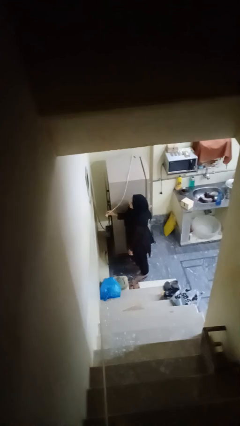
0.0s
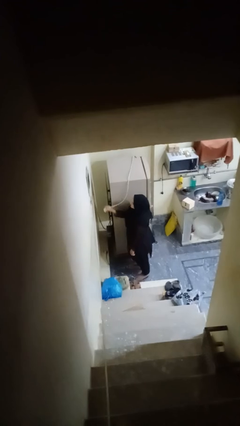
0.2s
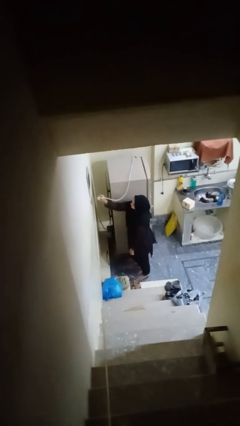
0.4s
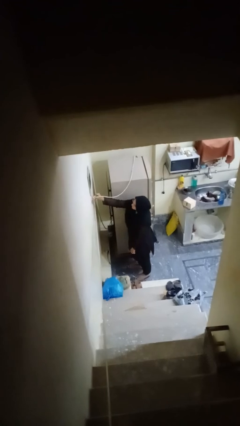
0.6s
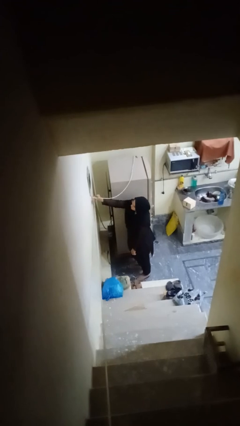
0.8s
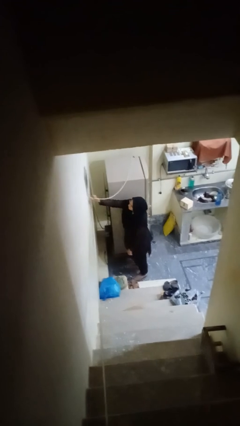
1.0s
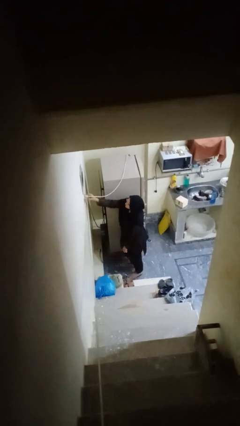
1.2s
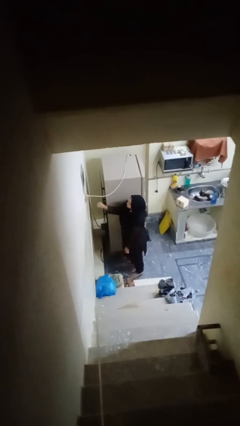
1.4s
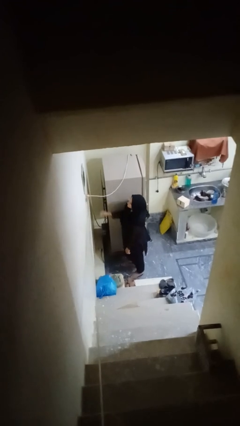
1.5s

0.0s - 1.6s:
person plugs into electrical socket

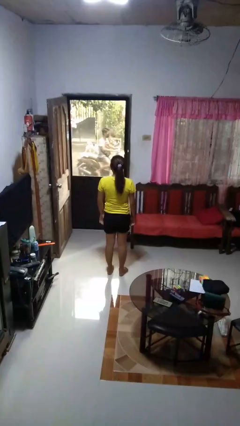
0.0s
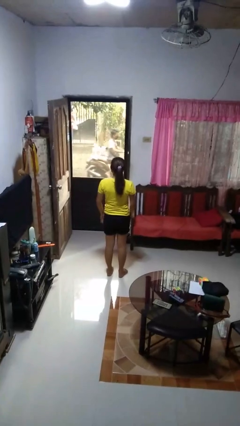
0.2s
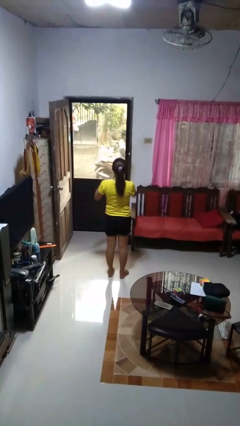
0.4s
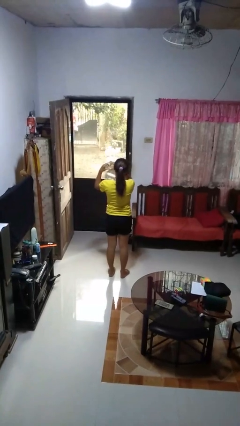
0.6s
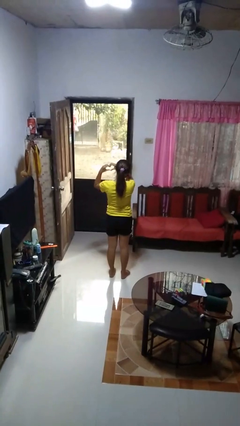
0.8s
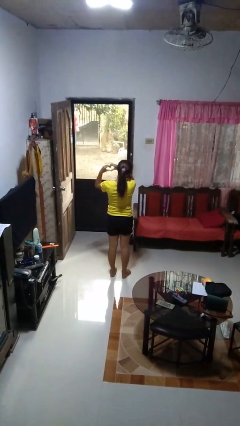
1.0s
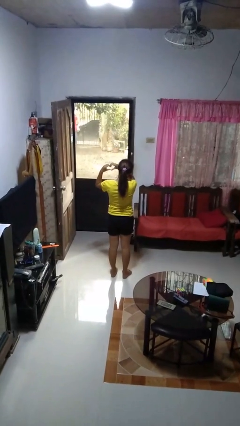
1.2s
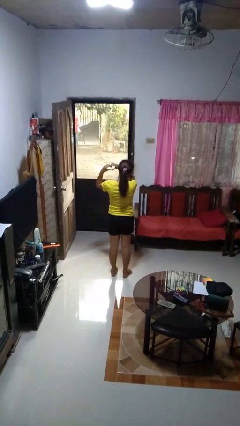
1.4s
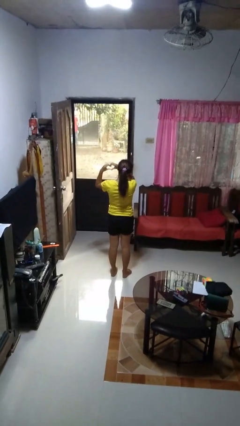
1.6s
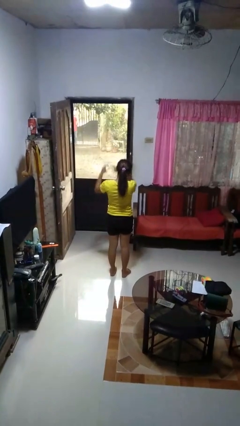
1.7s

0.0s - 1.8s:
person gestures heart

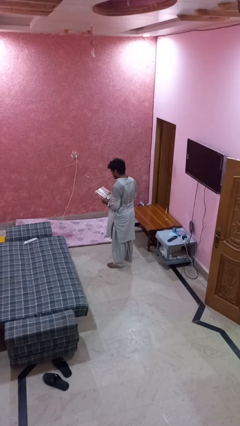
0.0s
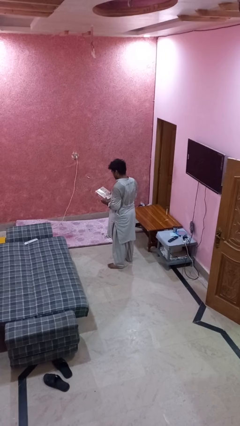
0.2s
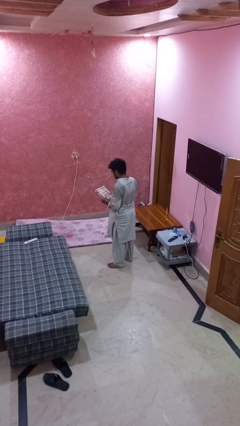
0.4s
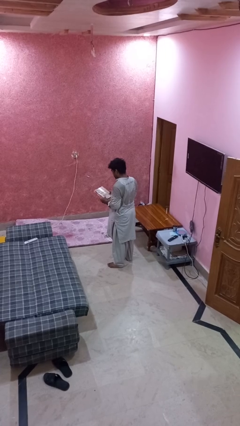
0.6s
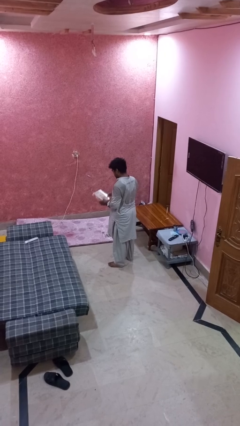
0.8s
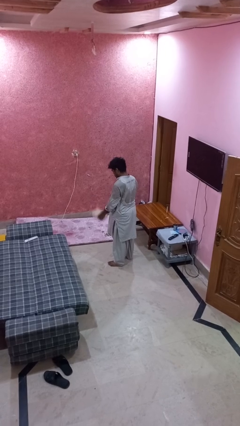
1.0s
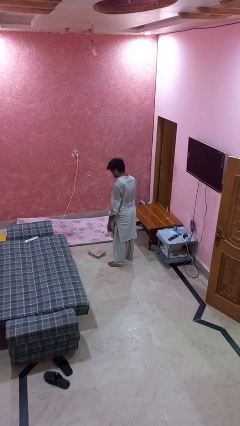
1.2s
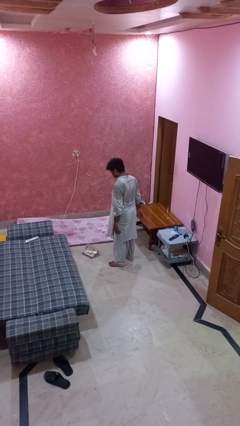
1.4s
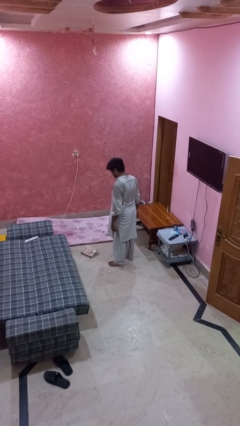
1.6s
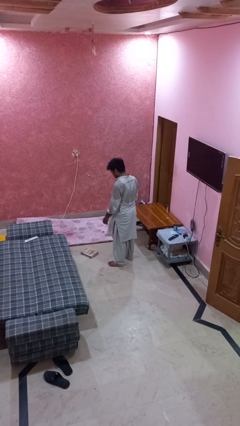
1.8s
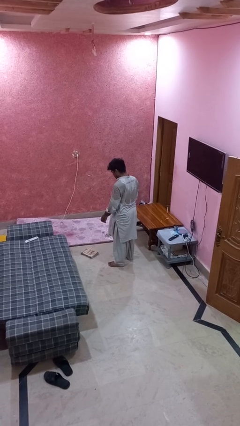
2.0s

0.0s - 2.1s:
person throws object to ground

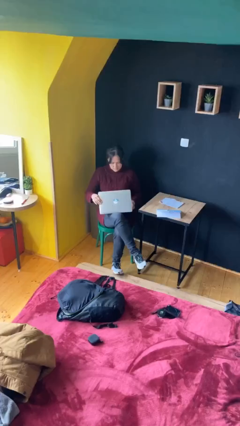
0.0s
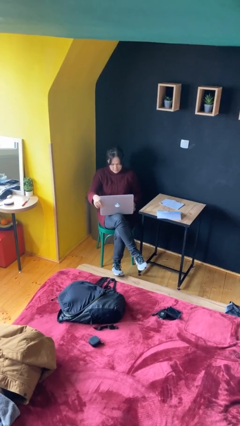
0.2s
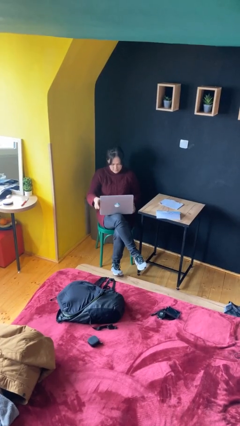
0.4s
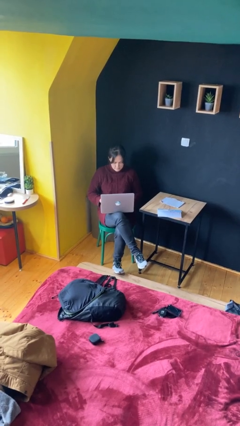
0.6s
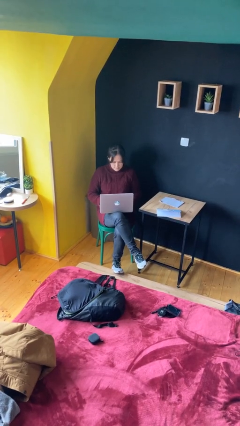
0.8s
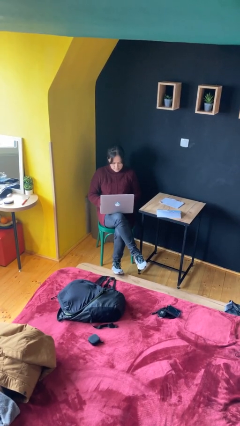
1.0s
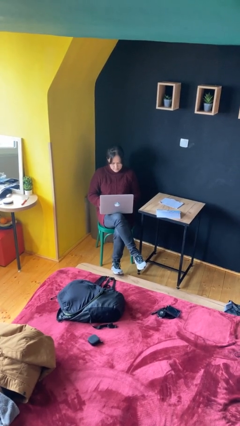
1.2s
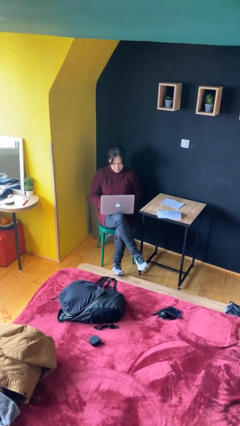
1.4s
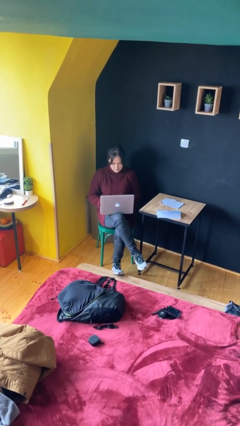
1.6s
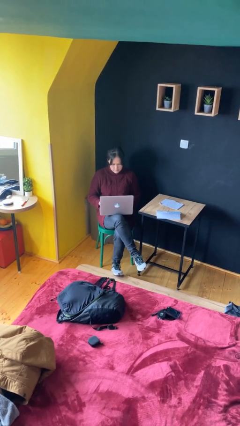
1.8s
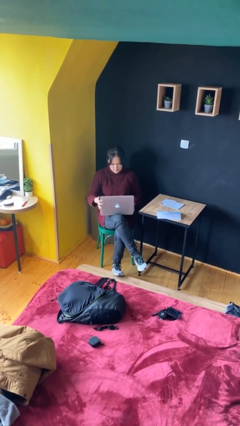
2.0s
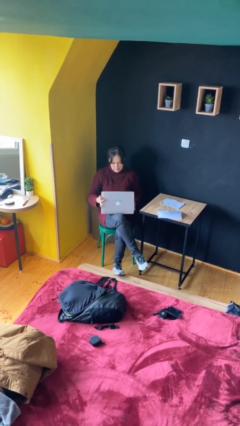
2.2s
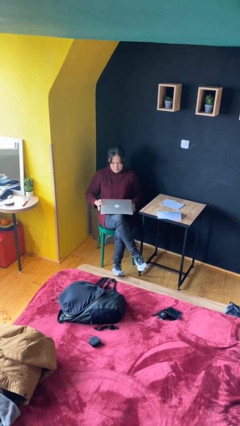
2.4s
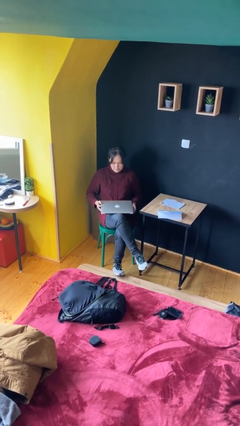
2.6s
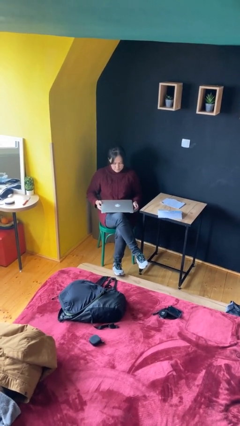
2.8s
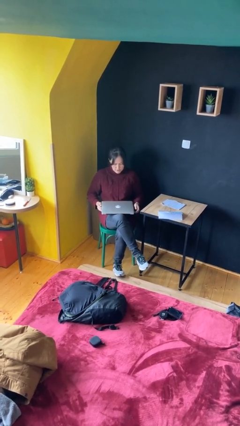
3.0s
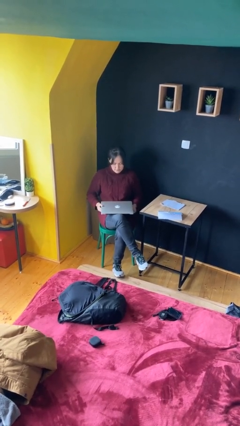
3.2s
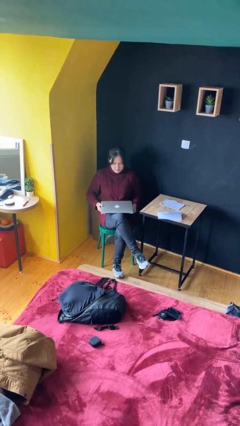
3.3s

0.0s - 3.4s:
person interacts with laptop

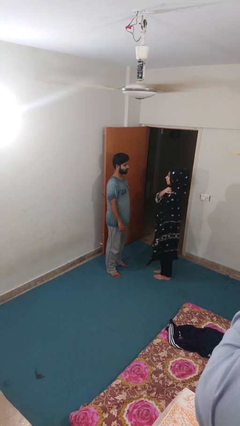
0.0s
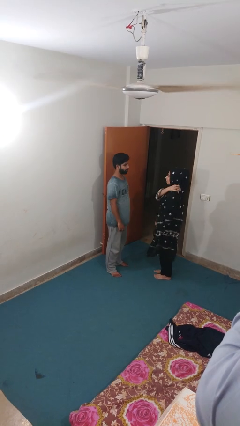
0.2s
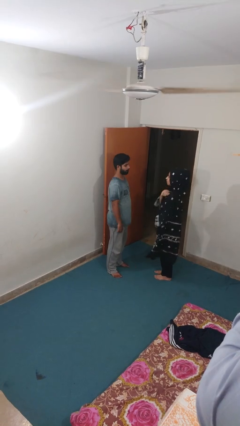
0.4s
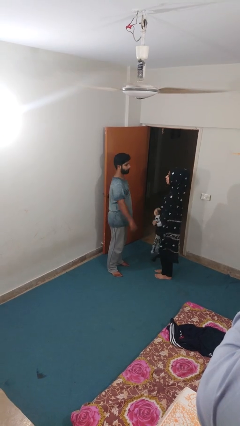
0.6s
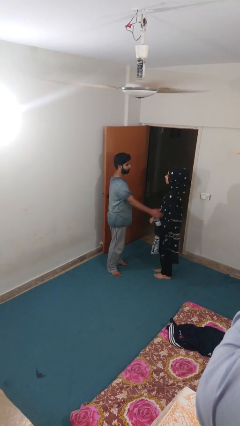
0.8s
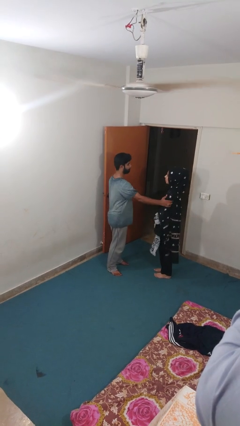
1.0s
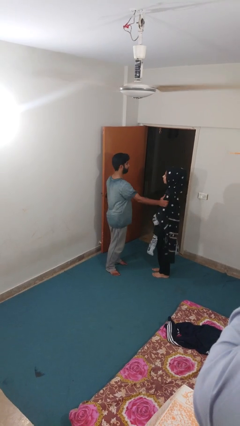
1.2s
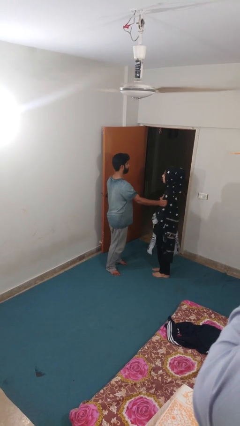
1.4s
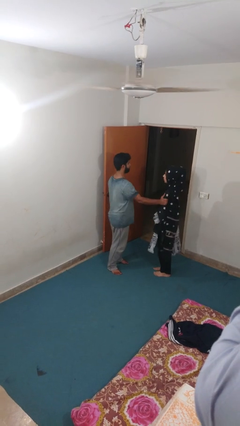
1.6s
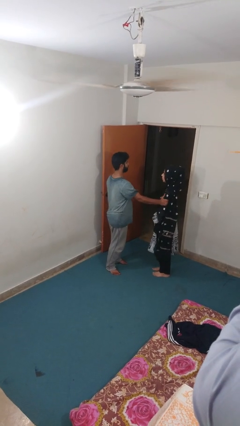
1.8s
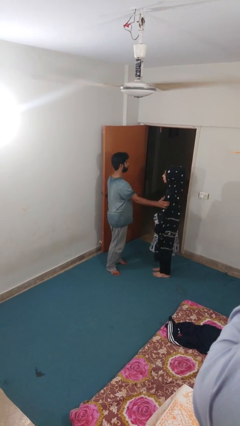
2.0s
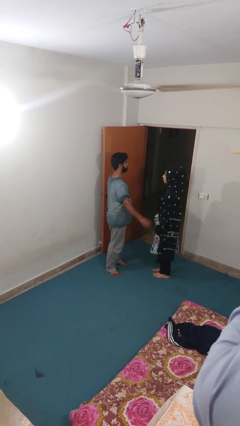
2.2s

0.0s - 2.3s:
person grabs person by bicep

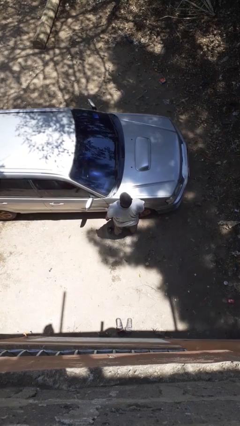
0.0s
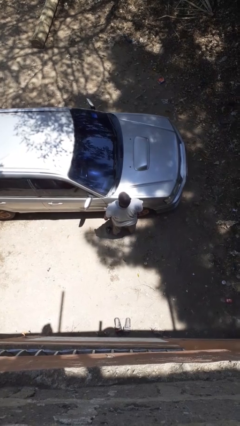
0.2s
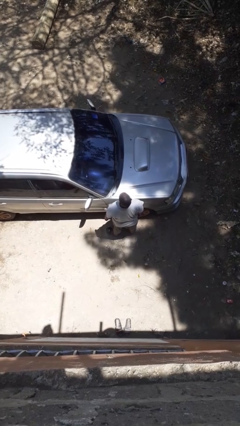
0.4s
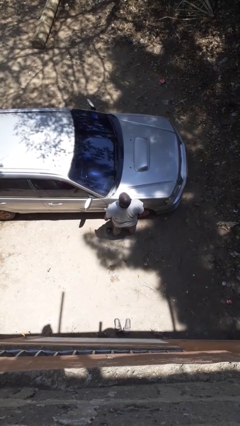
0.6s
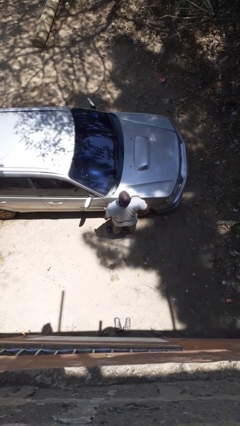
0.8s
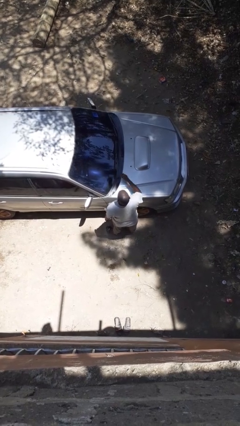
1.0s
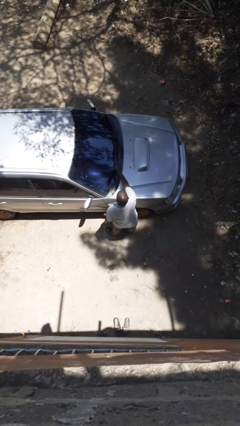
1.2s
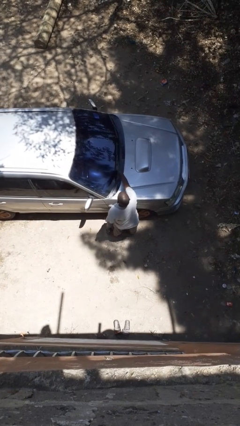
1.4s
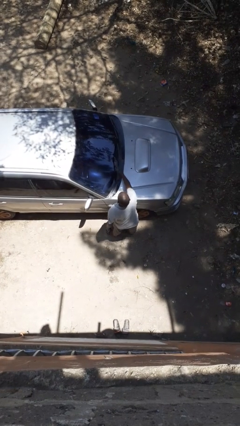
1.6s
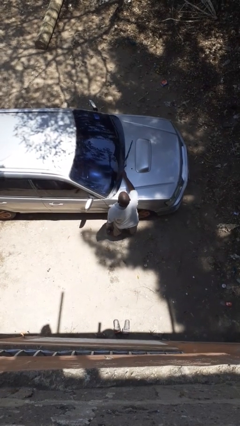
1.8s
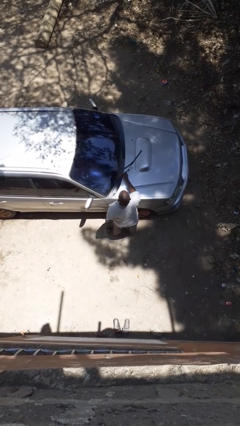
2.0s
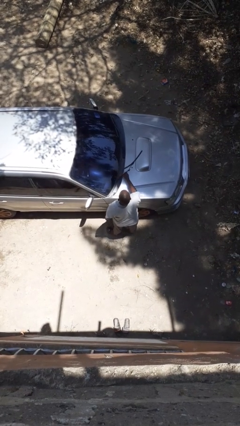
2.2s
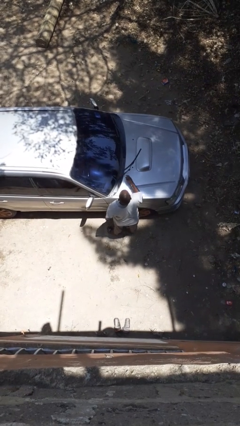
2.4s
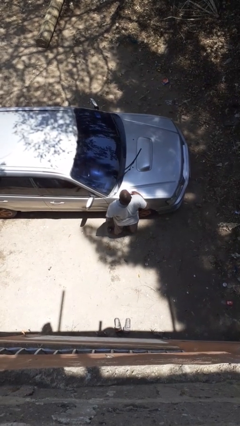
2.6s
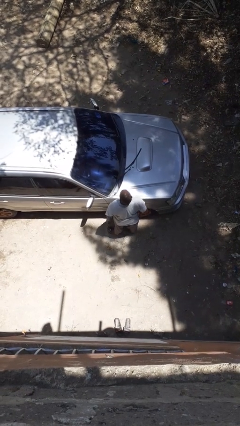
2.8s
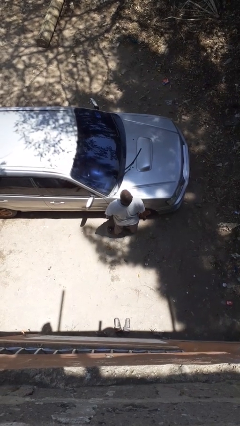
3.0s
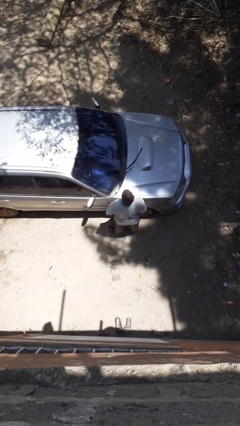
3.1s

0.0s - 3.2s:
person flips up car wipers

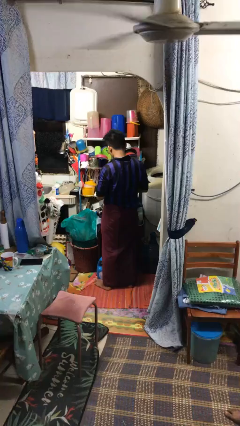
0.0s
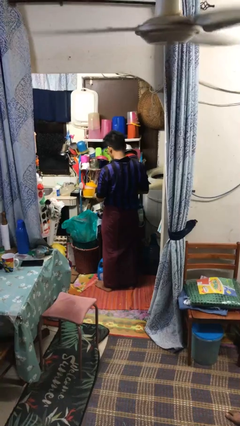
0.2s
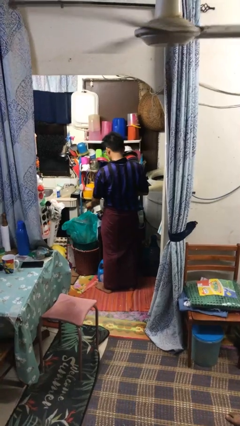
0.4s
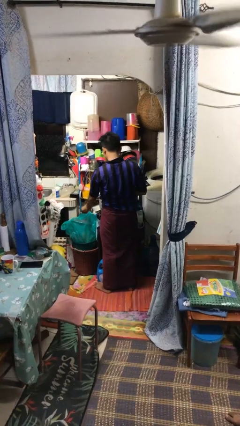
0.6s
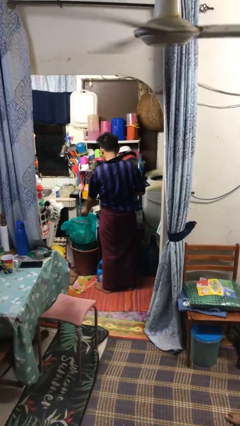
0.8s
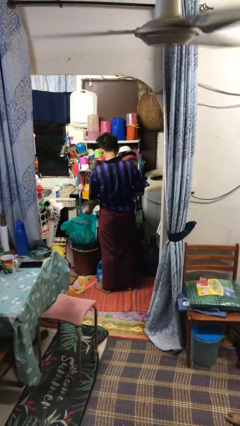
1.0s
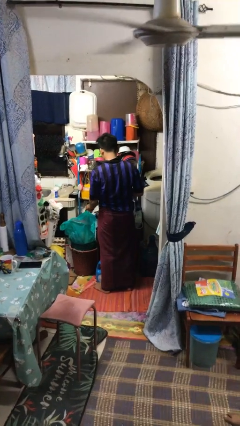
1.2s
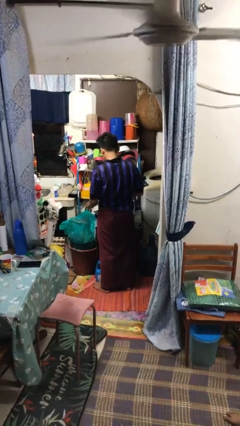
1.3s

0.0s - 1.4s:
person discards trash

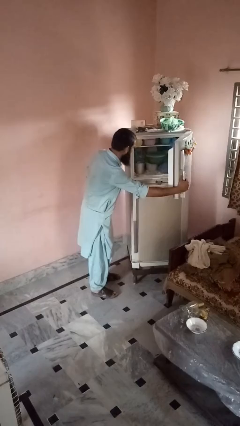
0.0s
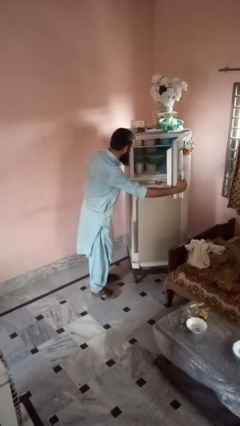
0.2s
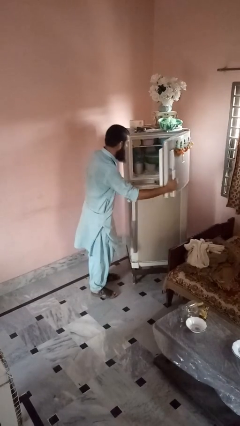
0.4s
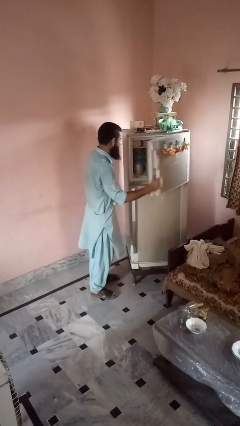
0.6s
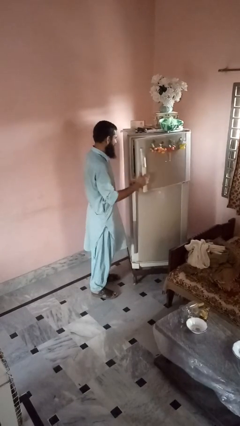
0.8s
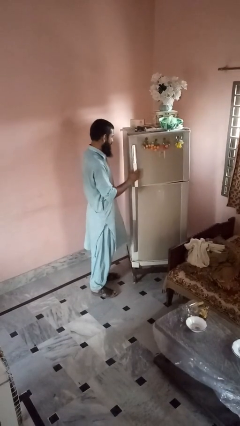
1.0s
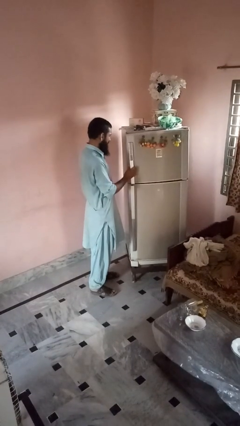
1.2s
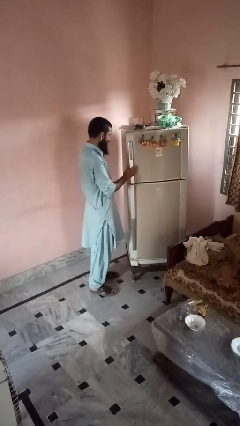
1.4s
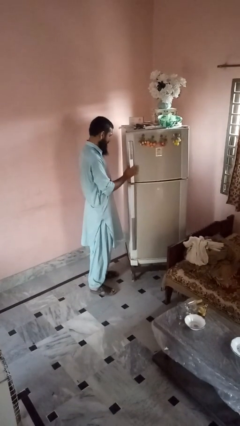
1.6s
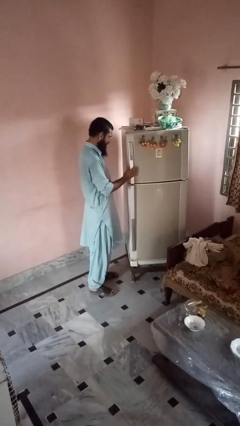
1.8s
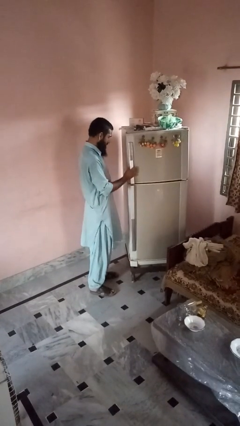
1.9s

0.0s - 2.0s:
person closes refrigerator
